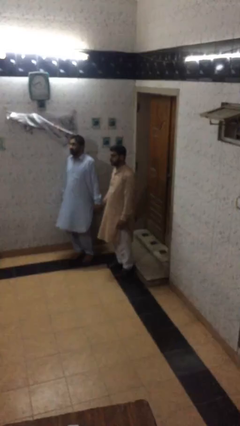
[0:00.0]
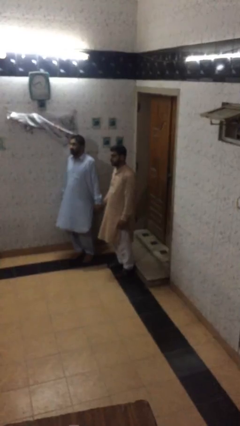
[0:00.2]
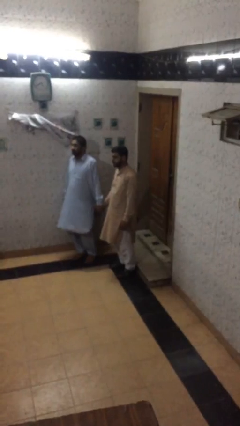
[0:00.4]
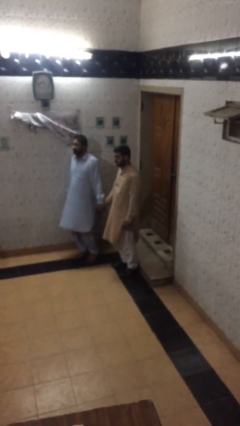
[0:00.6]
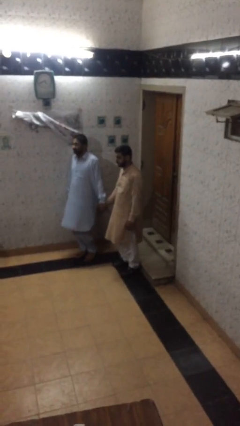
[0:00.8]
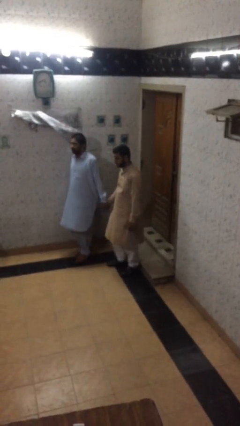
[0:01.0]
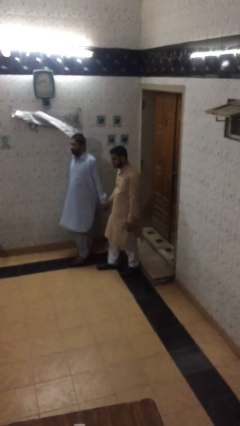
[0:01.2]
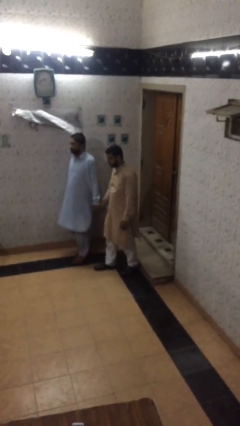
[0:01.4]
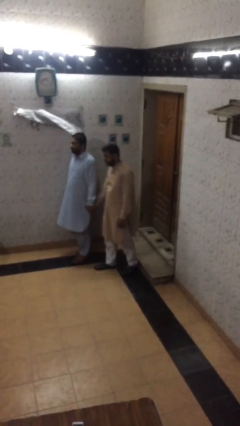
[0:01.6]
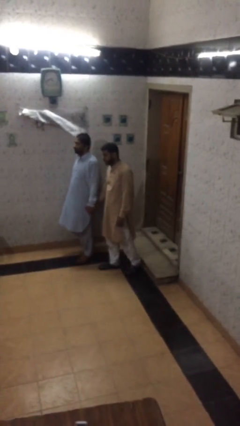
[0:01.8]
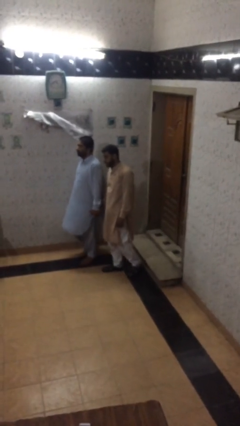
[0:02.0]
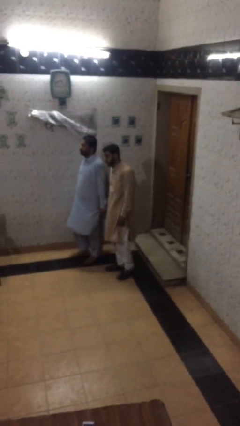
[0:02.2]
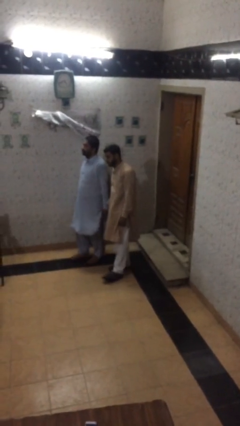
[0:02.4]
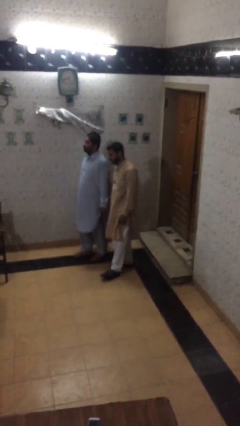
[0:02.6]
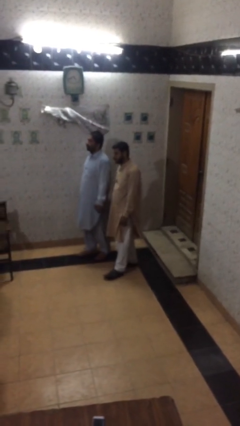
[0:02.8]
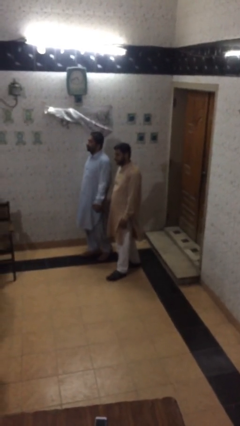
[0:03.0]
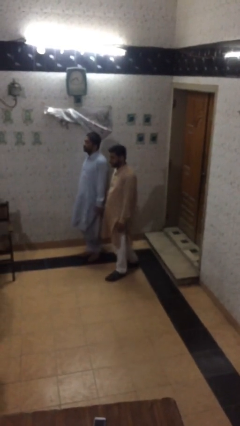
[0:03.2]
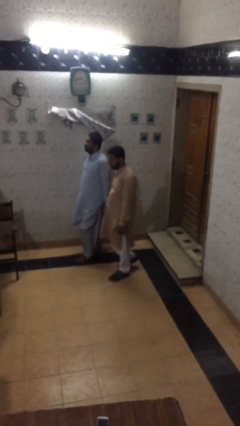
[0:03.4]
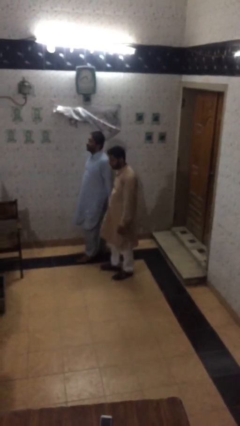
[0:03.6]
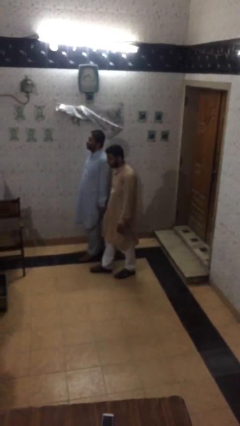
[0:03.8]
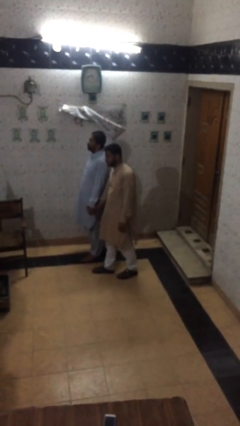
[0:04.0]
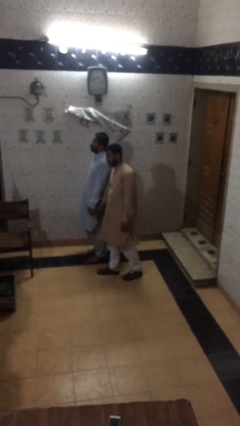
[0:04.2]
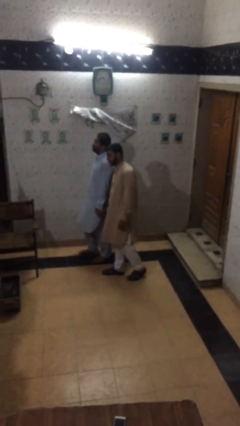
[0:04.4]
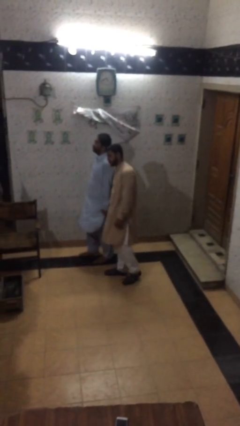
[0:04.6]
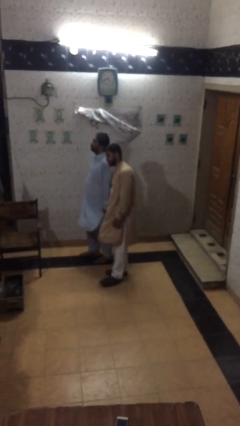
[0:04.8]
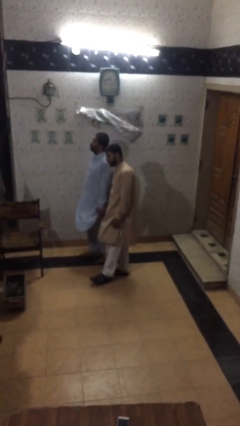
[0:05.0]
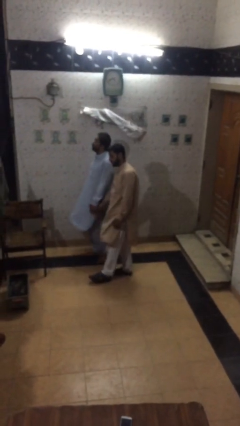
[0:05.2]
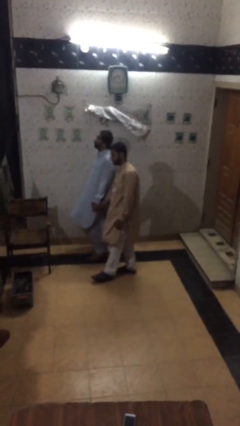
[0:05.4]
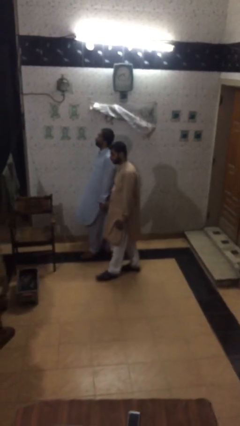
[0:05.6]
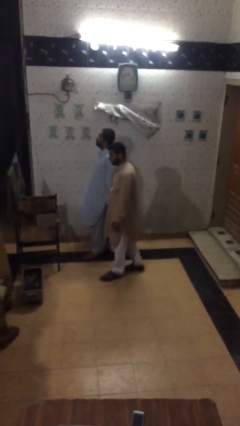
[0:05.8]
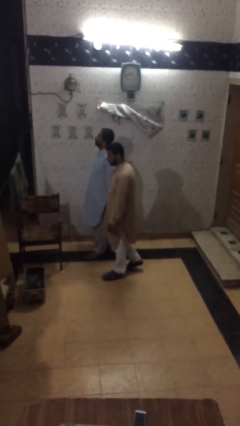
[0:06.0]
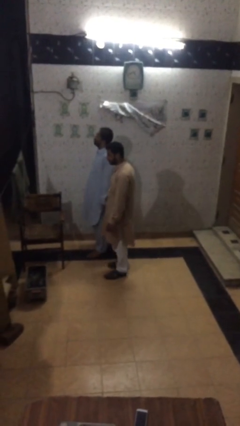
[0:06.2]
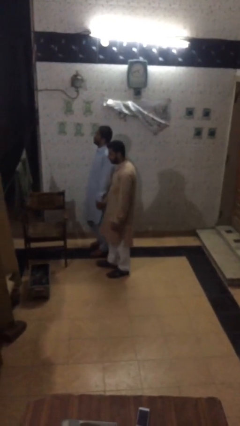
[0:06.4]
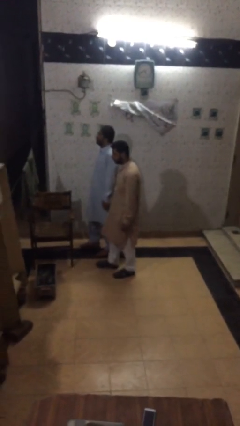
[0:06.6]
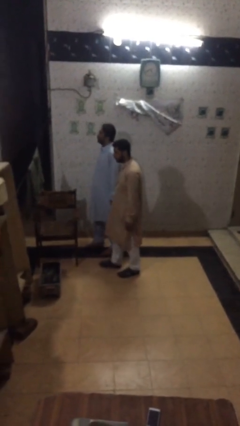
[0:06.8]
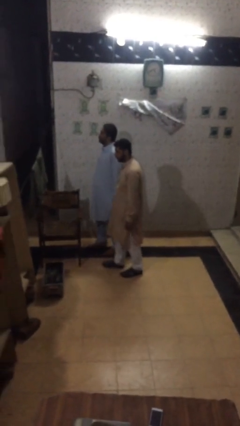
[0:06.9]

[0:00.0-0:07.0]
person holds hand

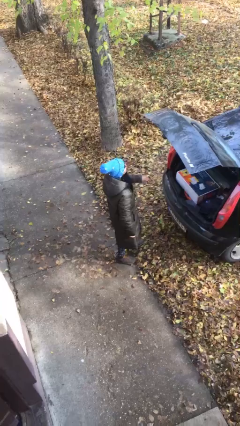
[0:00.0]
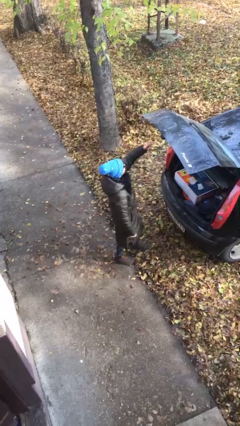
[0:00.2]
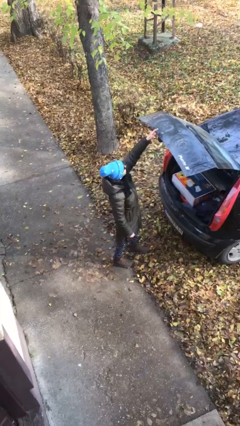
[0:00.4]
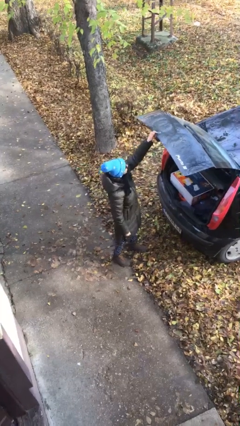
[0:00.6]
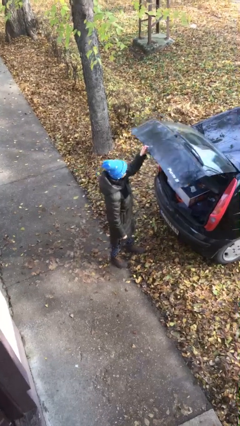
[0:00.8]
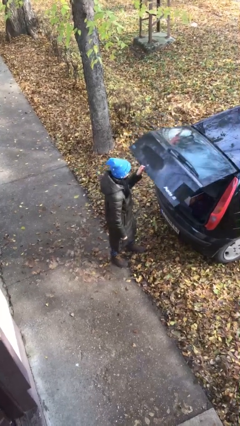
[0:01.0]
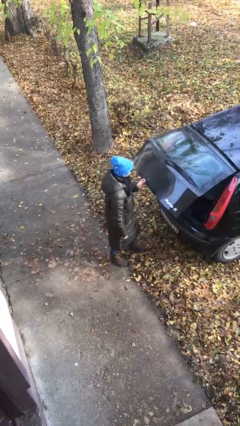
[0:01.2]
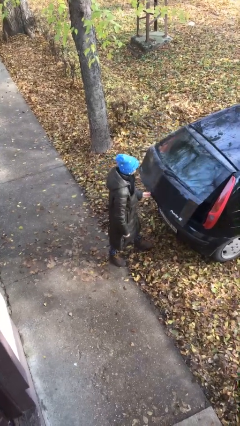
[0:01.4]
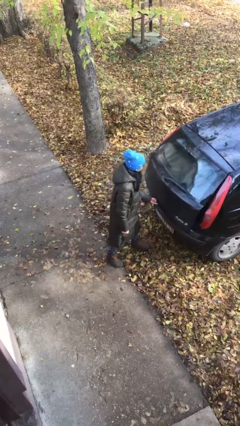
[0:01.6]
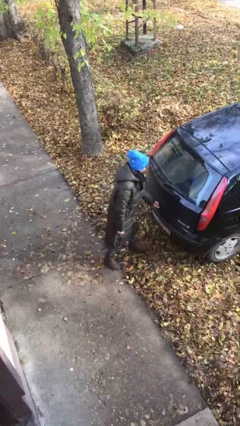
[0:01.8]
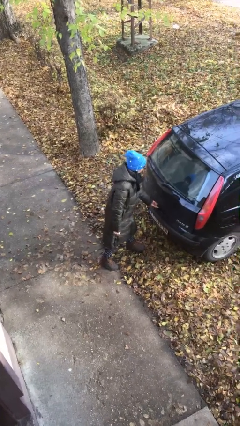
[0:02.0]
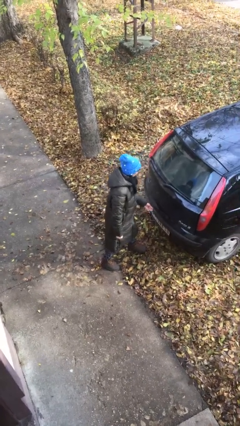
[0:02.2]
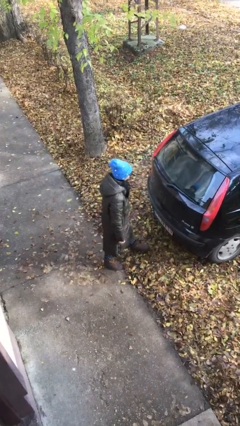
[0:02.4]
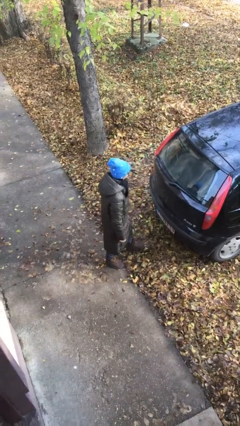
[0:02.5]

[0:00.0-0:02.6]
person closes car trunk

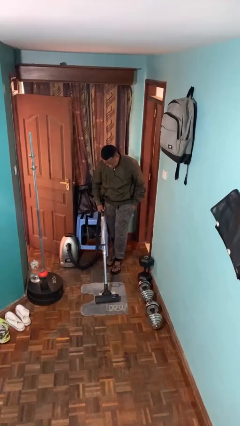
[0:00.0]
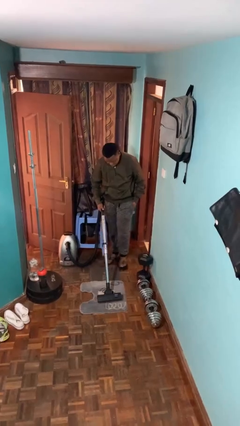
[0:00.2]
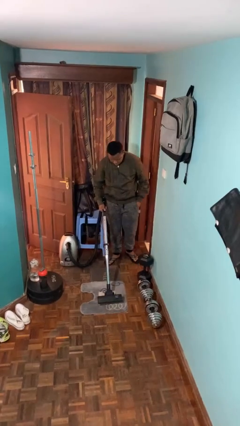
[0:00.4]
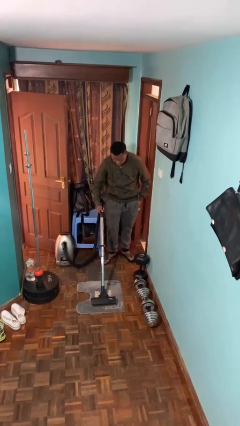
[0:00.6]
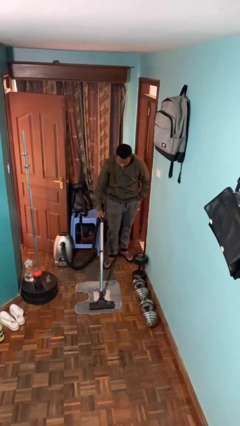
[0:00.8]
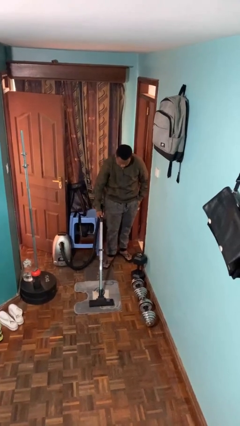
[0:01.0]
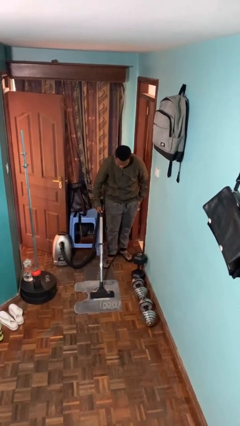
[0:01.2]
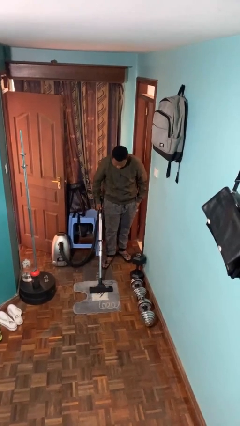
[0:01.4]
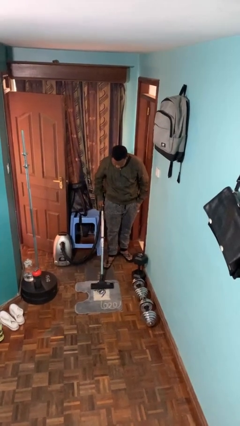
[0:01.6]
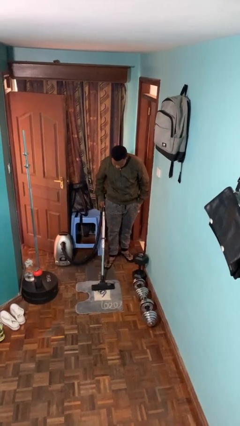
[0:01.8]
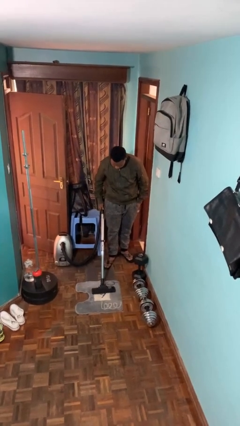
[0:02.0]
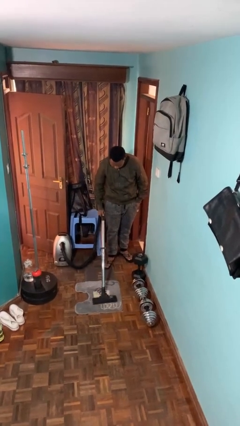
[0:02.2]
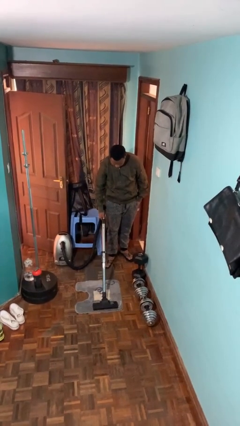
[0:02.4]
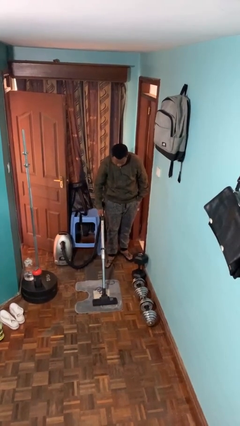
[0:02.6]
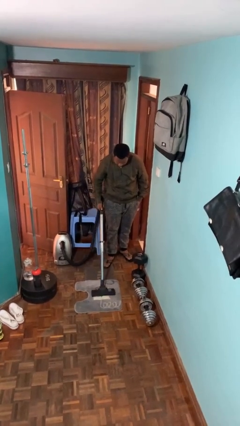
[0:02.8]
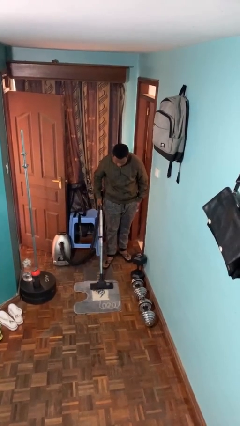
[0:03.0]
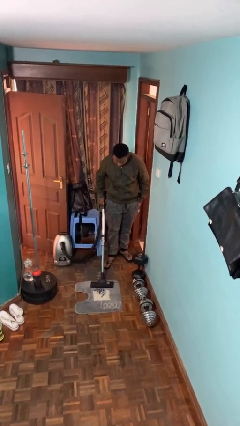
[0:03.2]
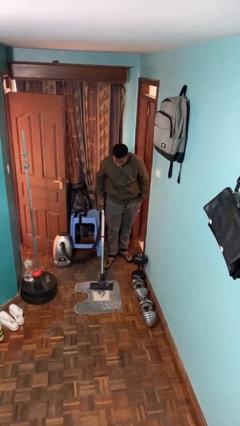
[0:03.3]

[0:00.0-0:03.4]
person vacuums carpet

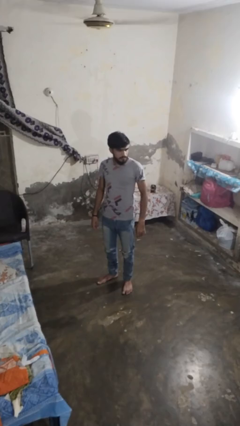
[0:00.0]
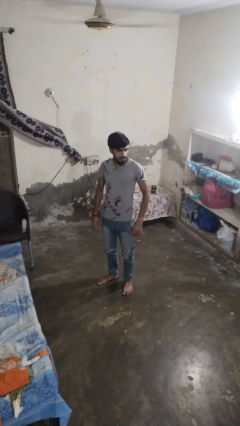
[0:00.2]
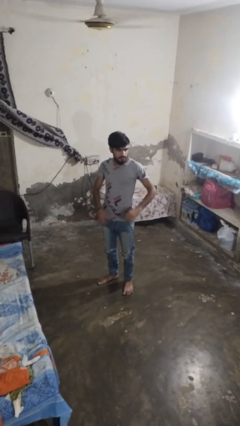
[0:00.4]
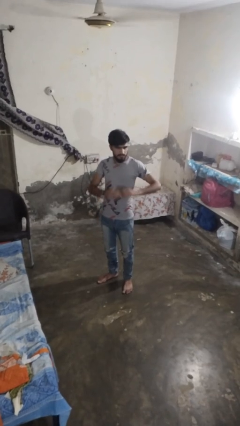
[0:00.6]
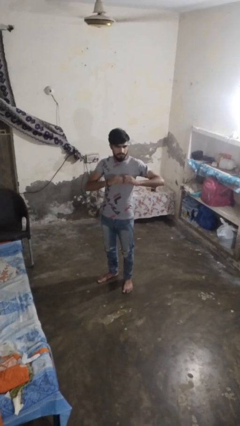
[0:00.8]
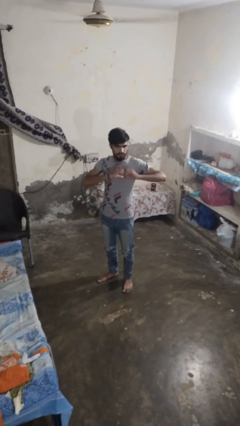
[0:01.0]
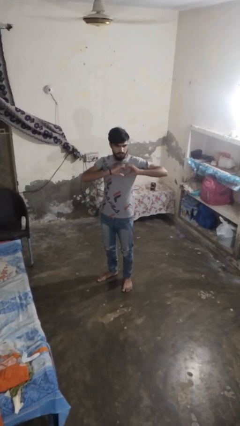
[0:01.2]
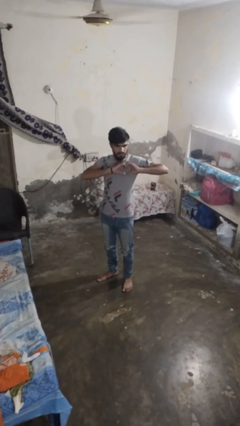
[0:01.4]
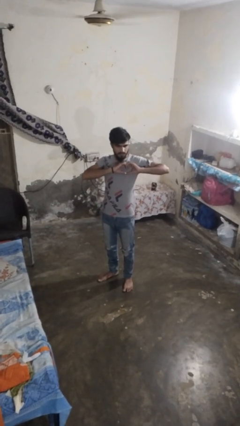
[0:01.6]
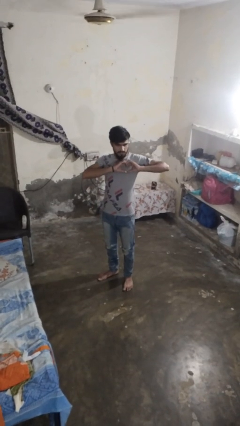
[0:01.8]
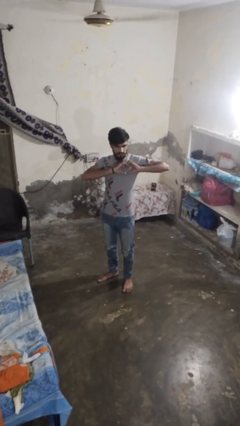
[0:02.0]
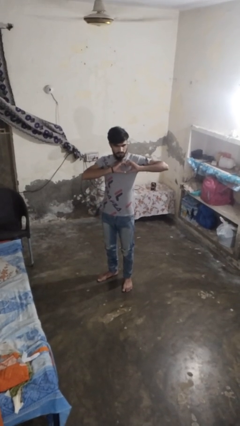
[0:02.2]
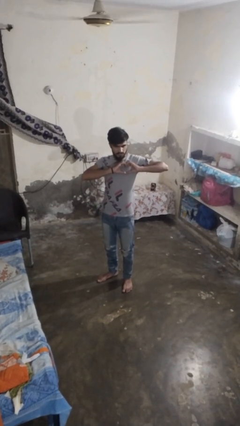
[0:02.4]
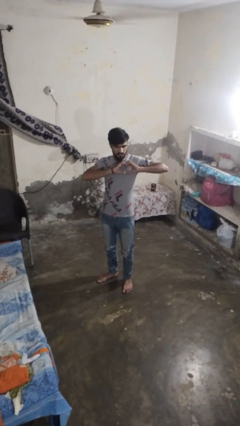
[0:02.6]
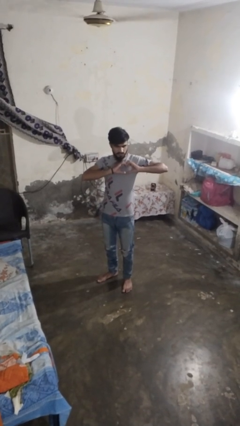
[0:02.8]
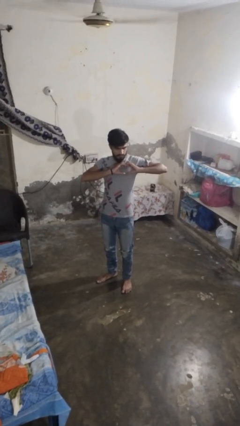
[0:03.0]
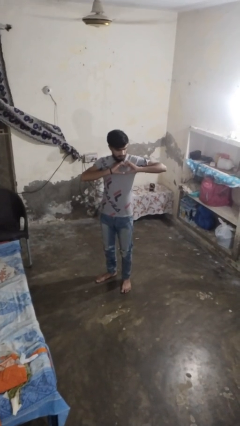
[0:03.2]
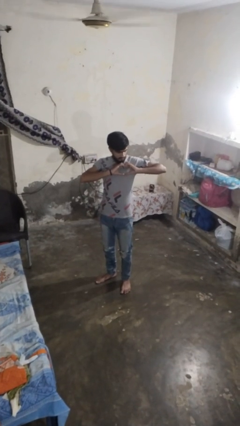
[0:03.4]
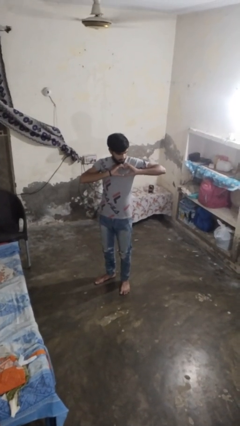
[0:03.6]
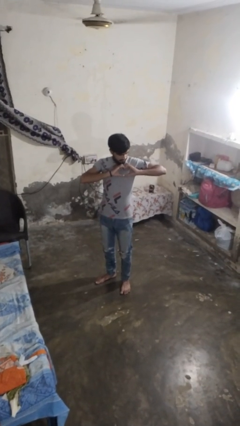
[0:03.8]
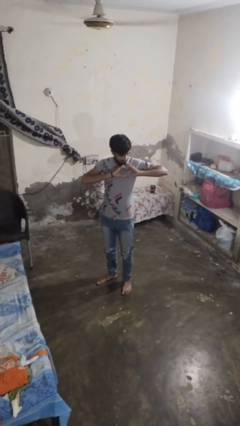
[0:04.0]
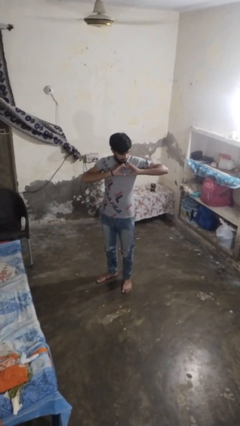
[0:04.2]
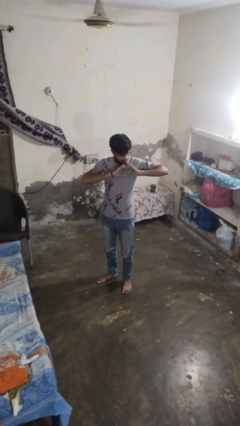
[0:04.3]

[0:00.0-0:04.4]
person gestures heart

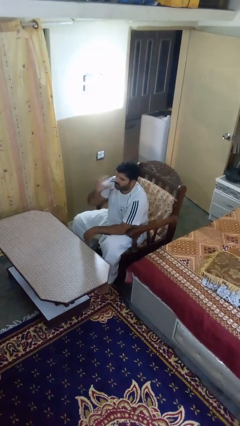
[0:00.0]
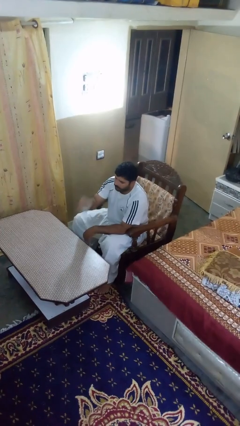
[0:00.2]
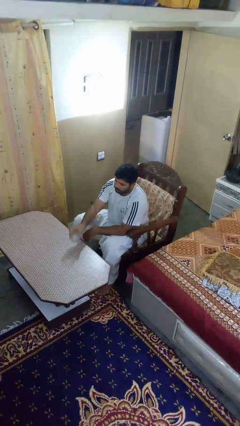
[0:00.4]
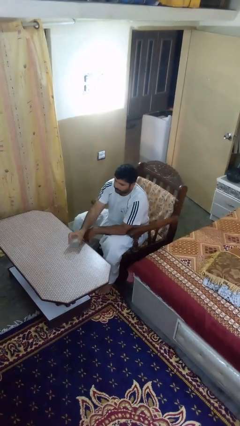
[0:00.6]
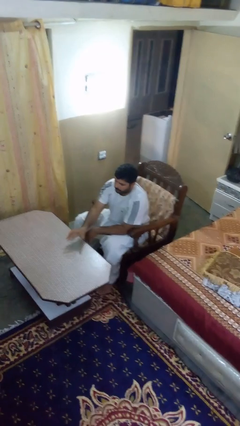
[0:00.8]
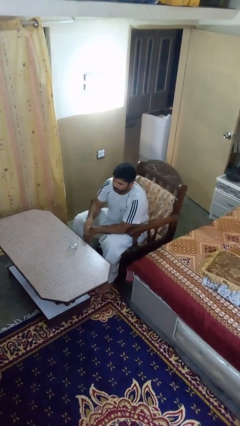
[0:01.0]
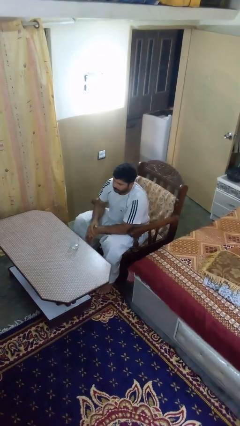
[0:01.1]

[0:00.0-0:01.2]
person puts down object on table
